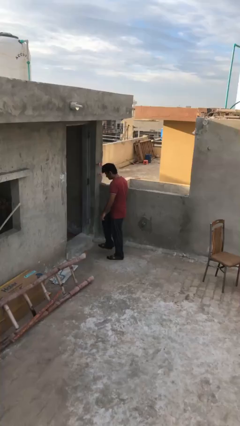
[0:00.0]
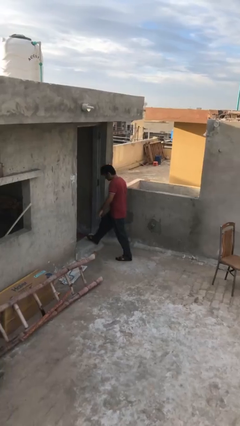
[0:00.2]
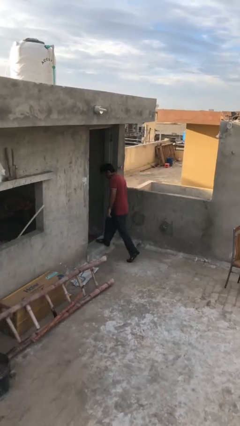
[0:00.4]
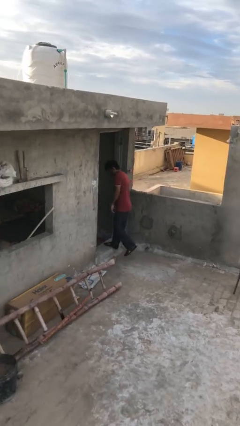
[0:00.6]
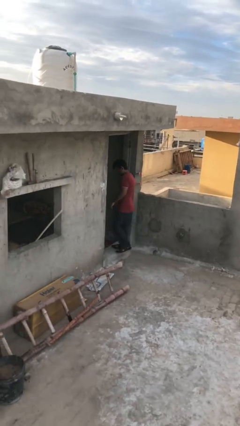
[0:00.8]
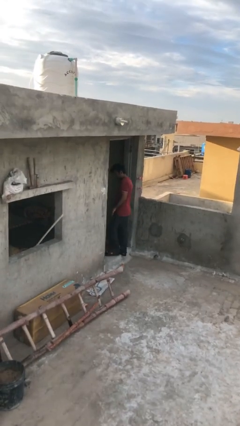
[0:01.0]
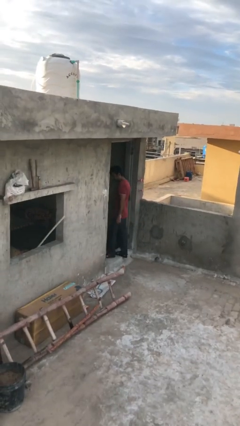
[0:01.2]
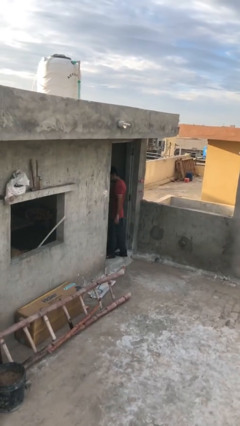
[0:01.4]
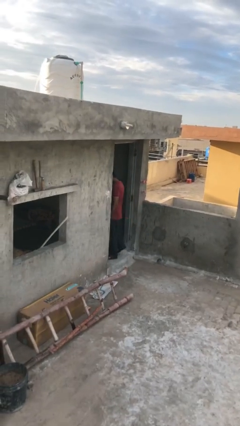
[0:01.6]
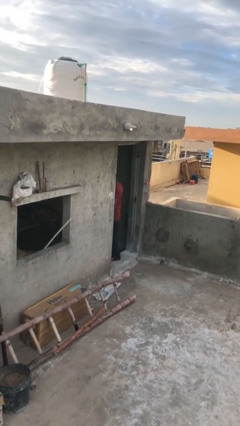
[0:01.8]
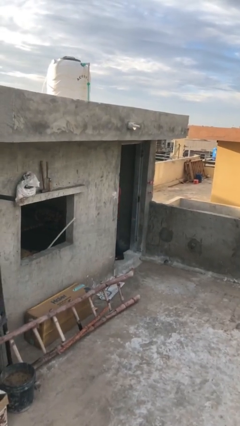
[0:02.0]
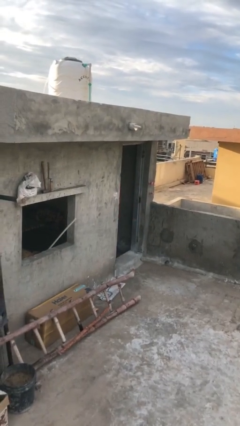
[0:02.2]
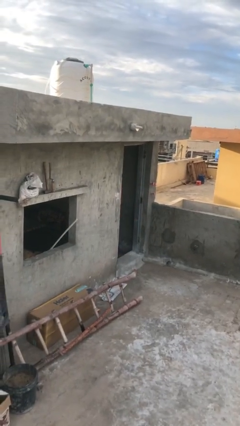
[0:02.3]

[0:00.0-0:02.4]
person exits scene through structure

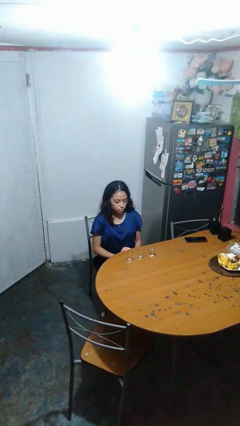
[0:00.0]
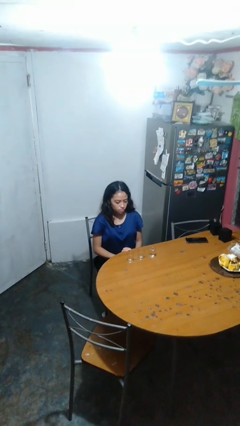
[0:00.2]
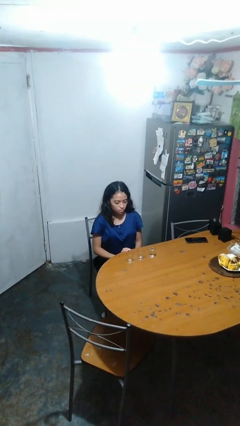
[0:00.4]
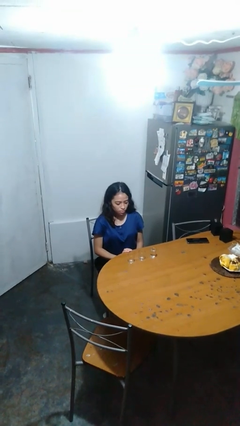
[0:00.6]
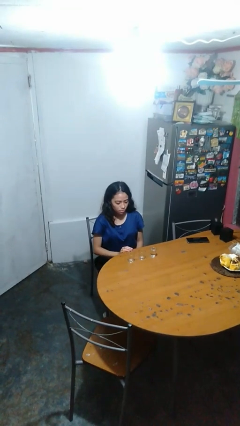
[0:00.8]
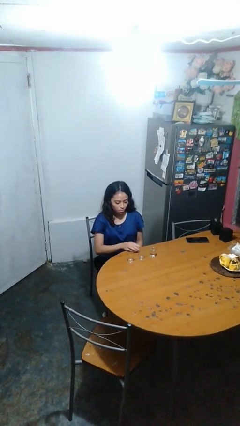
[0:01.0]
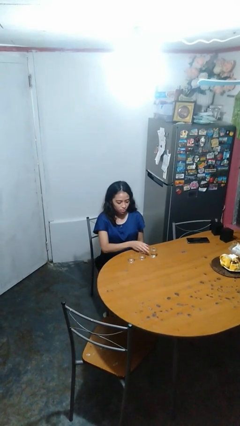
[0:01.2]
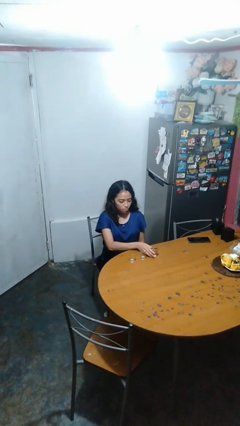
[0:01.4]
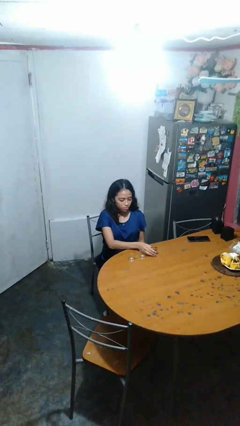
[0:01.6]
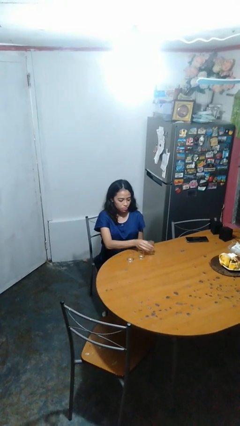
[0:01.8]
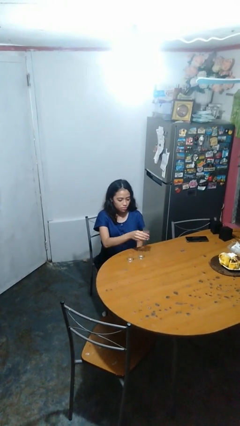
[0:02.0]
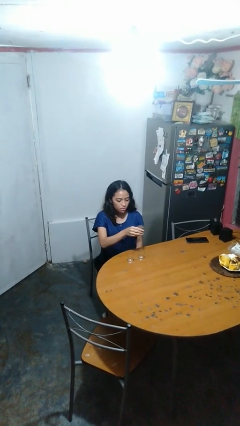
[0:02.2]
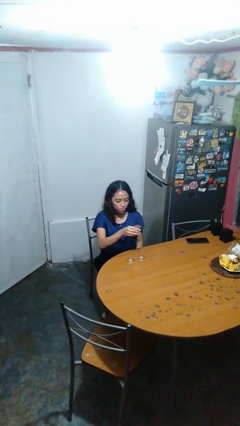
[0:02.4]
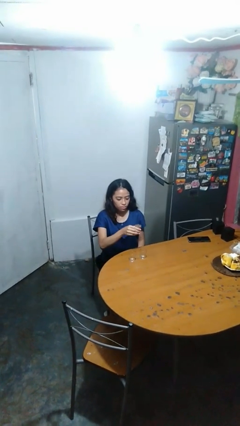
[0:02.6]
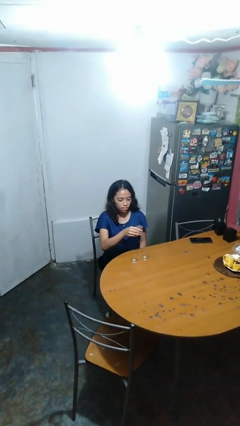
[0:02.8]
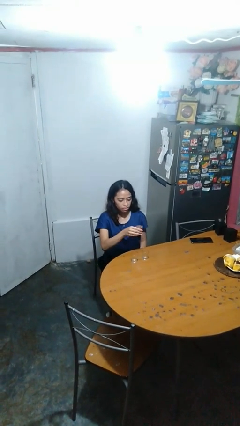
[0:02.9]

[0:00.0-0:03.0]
person picks up object from table

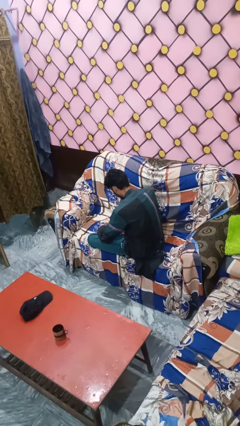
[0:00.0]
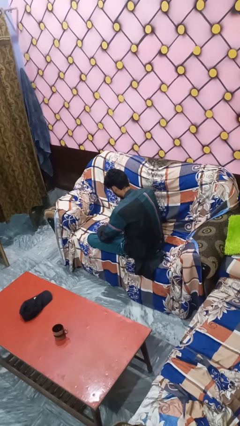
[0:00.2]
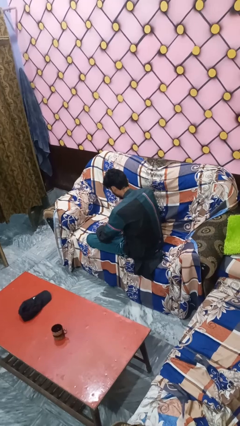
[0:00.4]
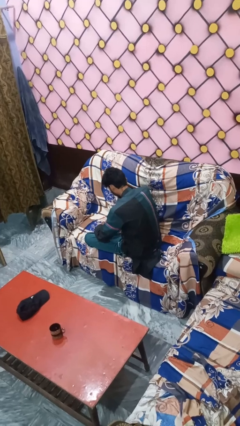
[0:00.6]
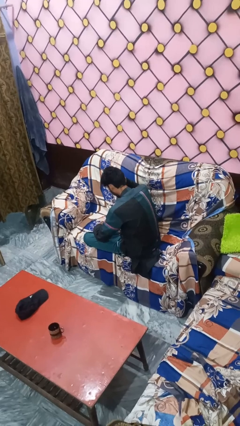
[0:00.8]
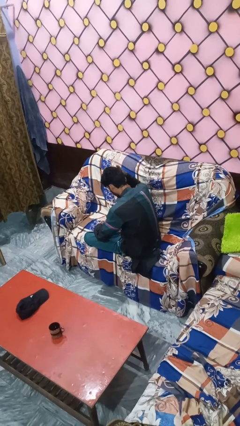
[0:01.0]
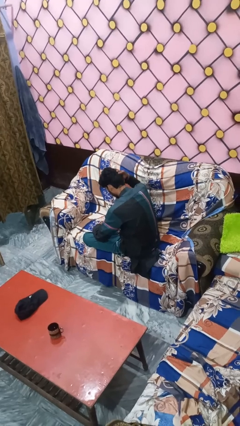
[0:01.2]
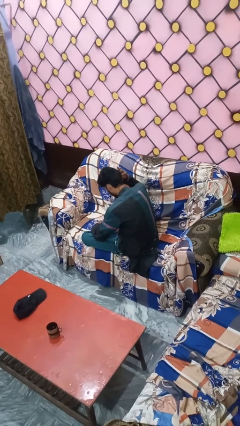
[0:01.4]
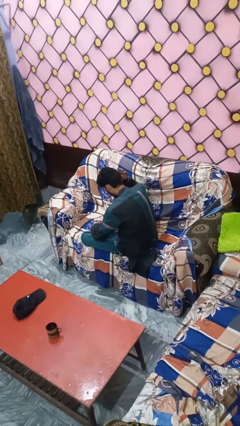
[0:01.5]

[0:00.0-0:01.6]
person pats head

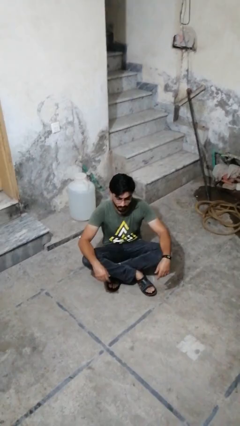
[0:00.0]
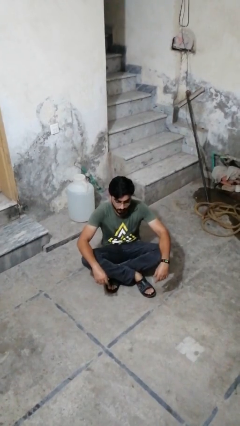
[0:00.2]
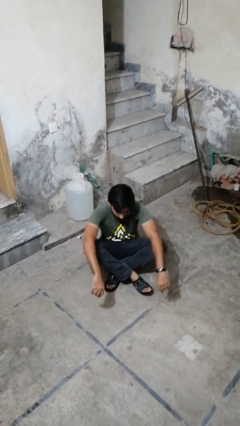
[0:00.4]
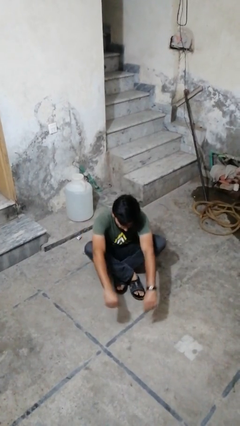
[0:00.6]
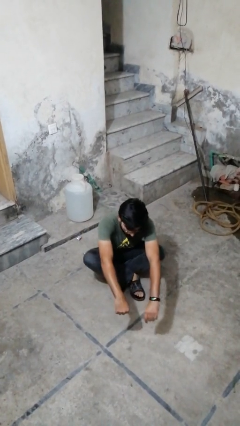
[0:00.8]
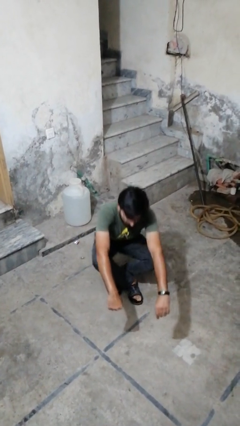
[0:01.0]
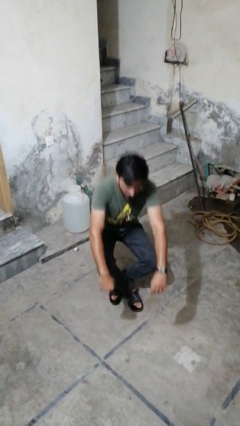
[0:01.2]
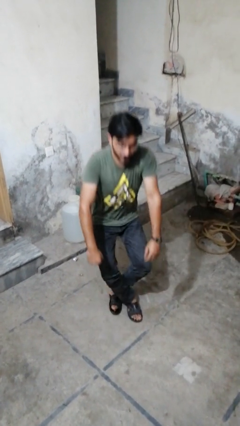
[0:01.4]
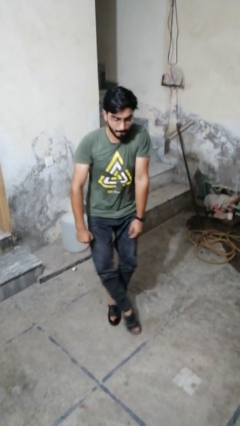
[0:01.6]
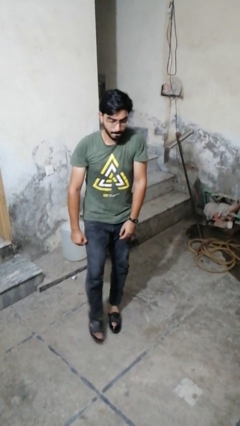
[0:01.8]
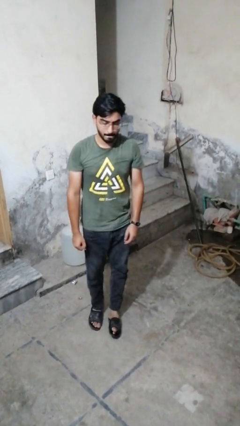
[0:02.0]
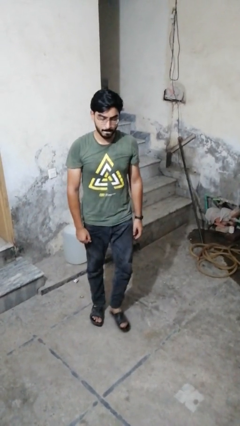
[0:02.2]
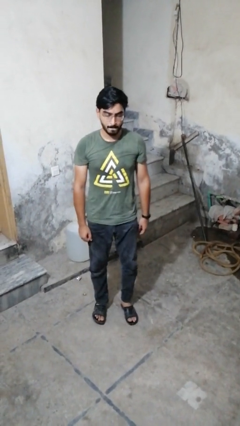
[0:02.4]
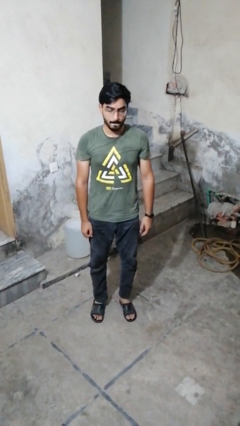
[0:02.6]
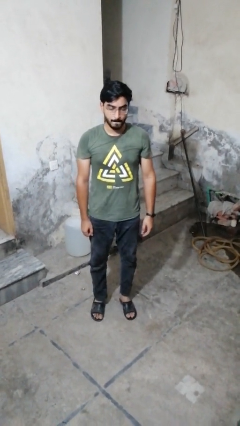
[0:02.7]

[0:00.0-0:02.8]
person stands up from floor

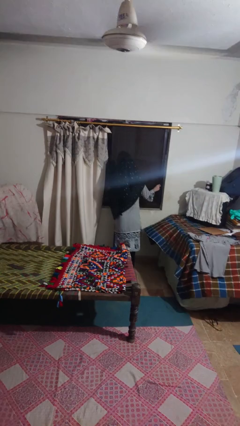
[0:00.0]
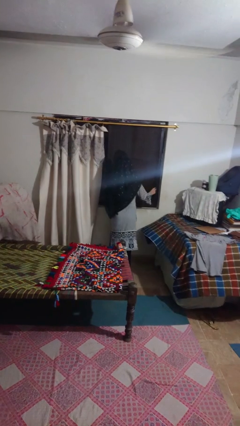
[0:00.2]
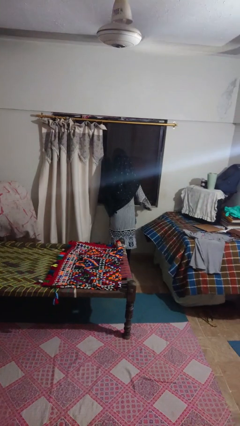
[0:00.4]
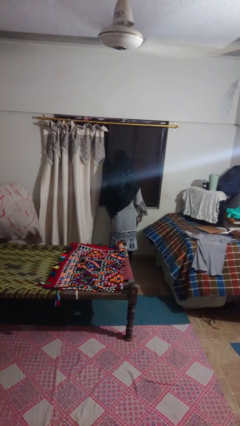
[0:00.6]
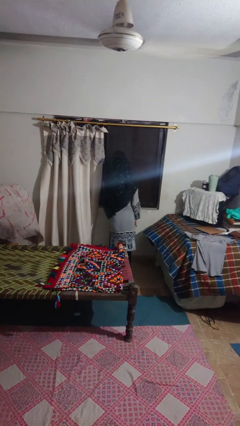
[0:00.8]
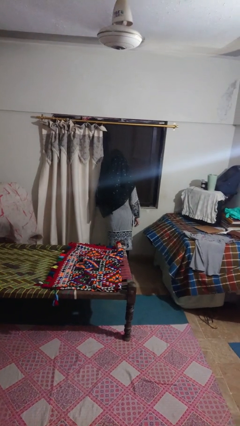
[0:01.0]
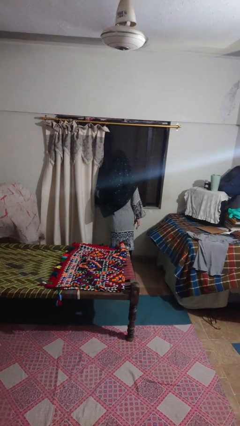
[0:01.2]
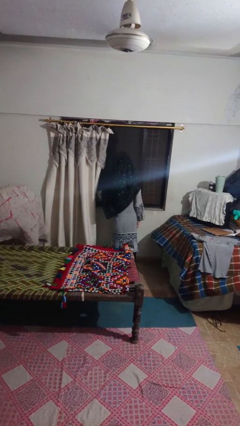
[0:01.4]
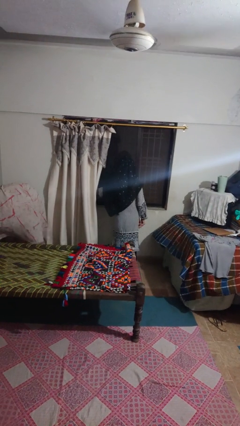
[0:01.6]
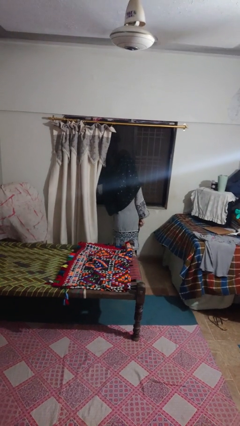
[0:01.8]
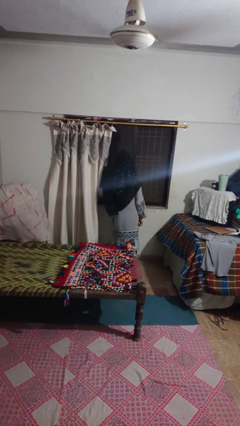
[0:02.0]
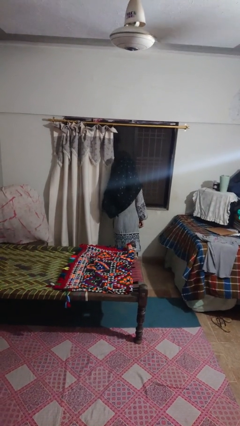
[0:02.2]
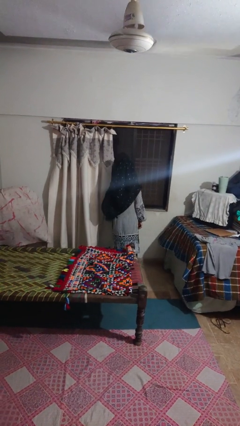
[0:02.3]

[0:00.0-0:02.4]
person opens home window

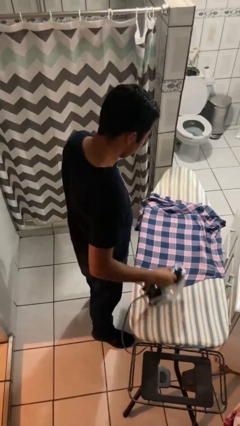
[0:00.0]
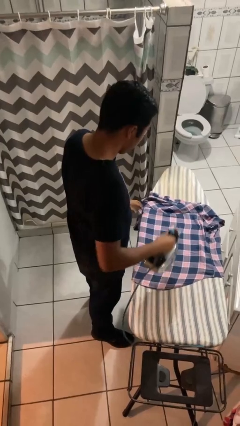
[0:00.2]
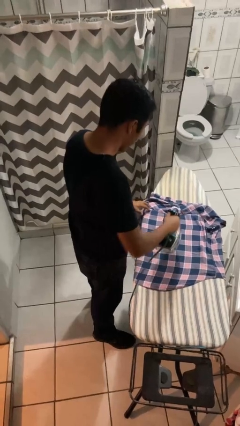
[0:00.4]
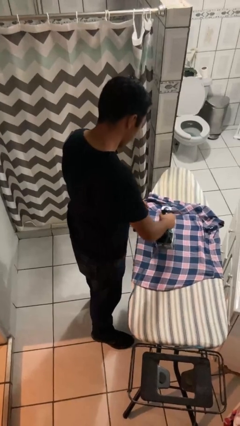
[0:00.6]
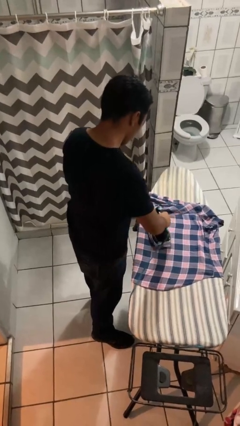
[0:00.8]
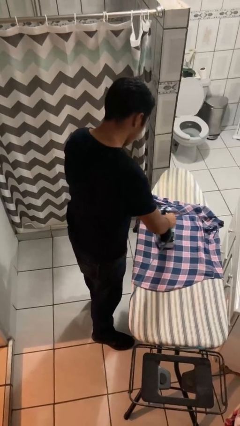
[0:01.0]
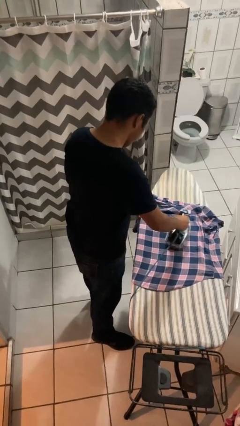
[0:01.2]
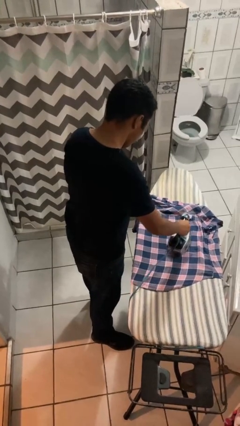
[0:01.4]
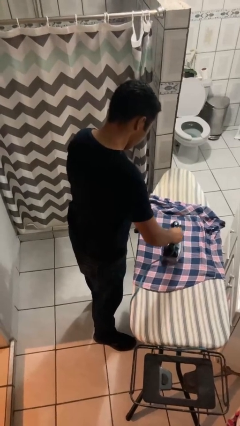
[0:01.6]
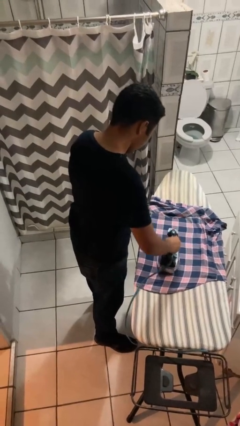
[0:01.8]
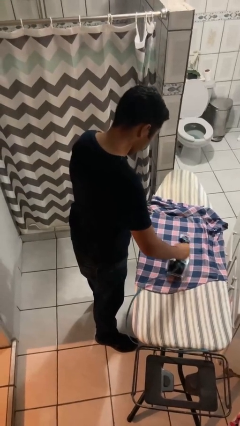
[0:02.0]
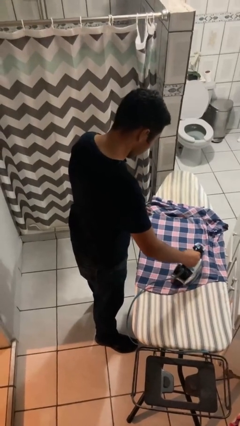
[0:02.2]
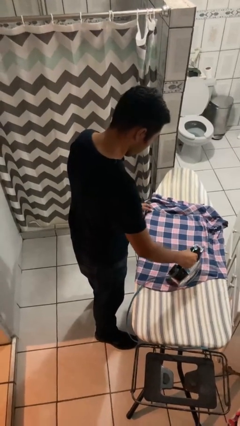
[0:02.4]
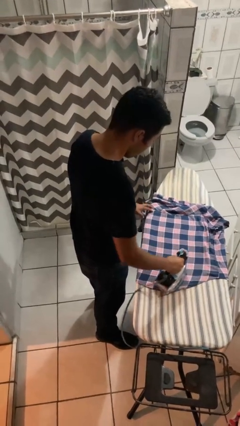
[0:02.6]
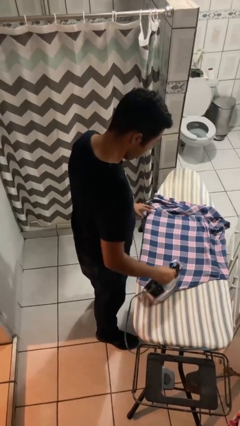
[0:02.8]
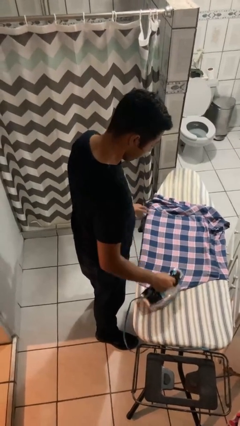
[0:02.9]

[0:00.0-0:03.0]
person irons clothes

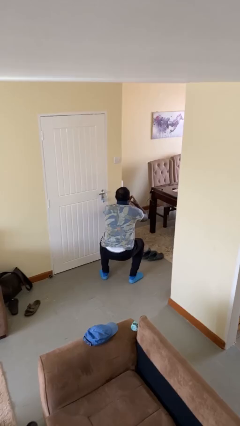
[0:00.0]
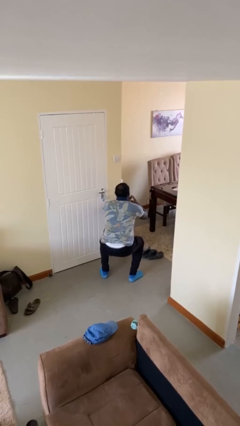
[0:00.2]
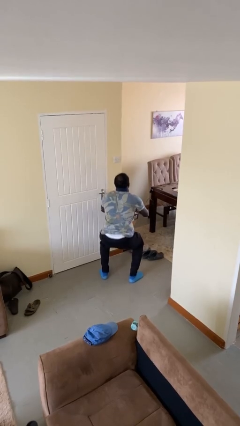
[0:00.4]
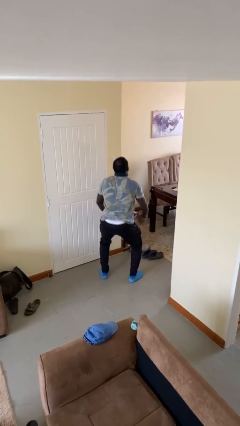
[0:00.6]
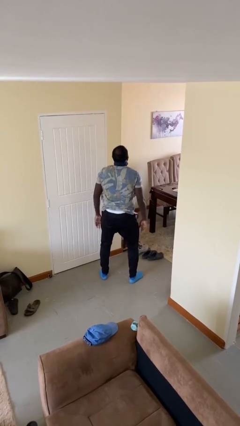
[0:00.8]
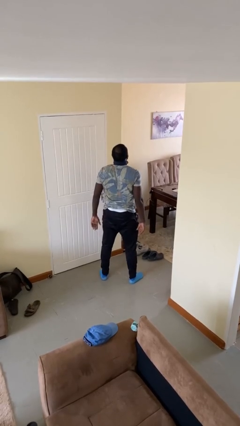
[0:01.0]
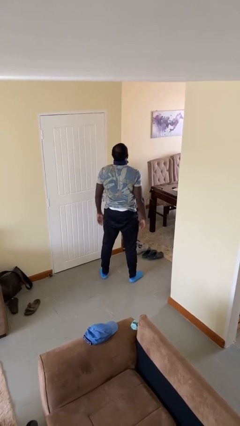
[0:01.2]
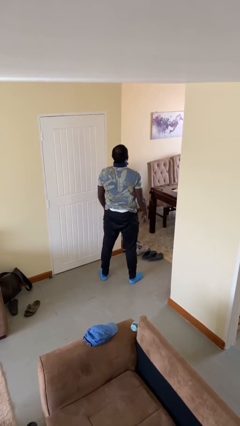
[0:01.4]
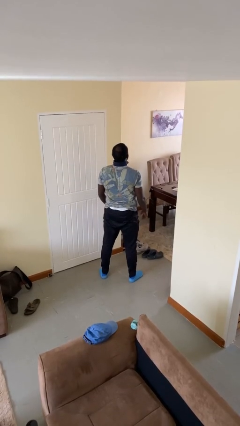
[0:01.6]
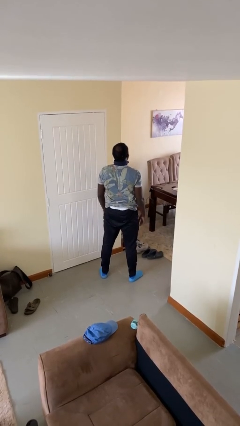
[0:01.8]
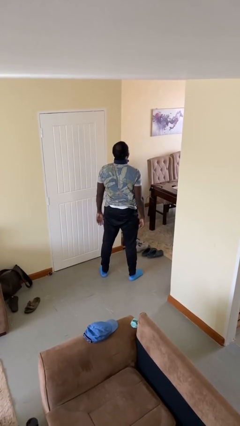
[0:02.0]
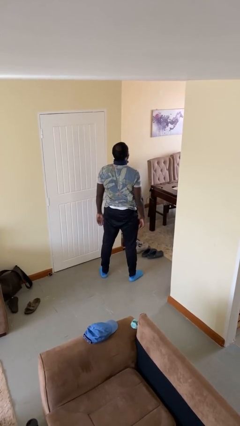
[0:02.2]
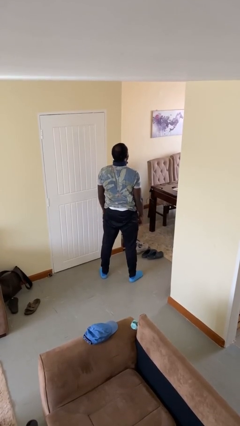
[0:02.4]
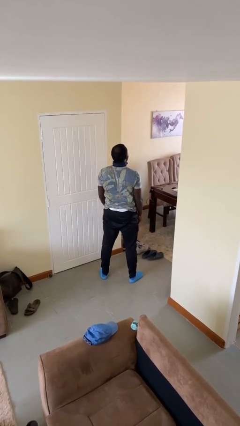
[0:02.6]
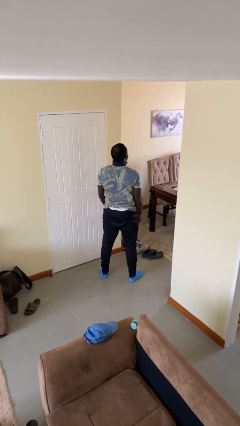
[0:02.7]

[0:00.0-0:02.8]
person stands up
